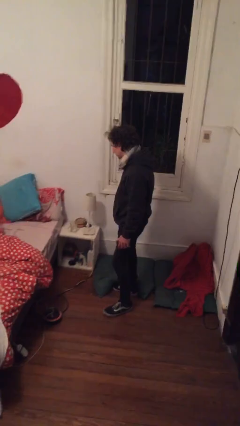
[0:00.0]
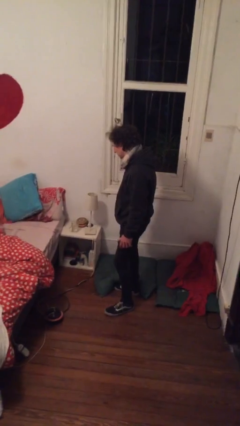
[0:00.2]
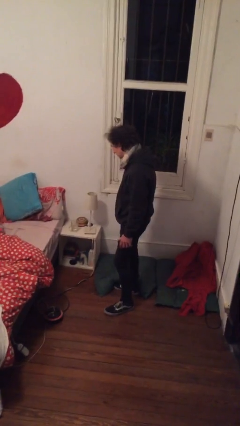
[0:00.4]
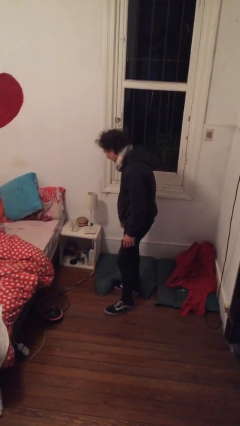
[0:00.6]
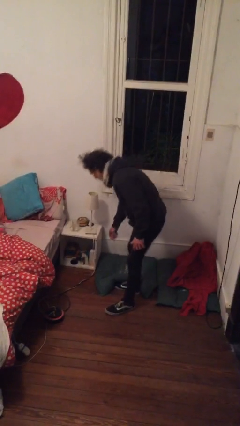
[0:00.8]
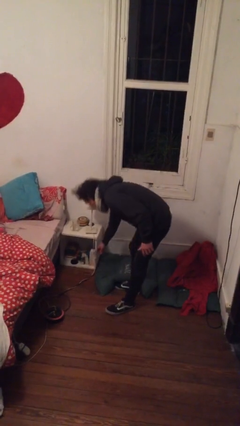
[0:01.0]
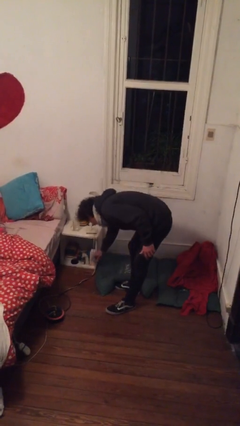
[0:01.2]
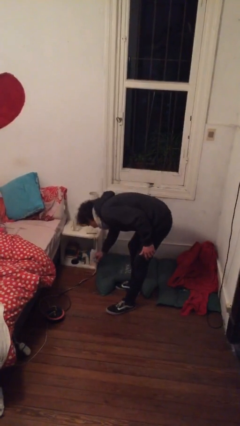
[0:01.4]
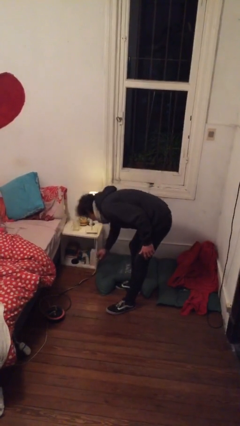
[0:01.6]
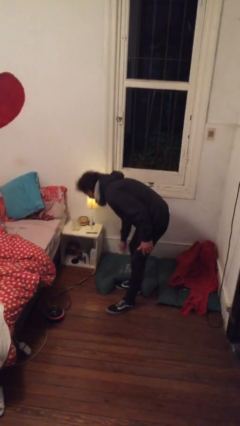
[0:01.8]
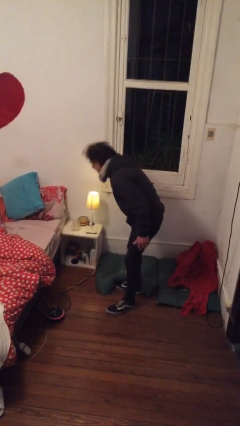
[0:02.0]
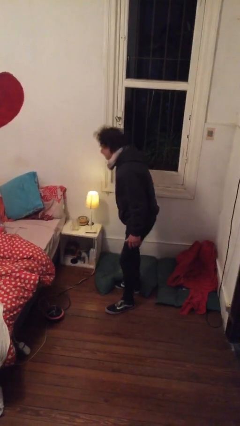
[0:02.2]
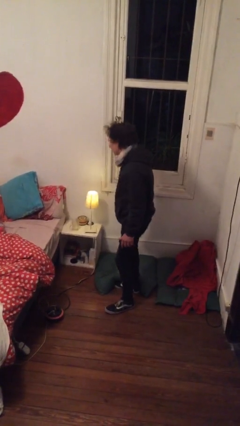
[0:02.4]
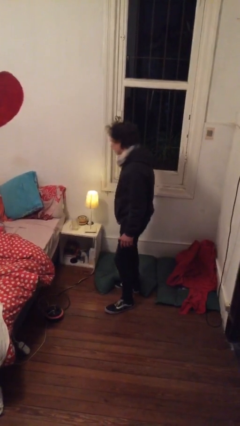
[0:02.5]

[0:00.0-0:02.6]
person turns on lamp

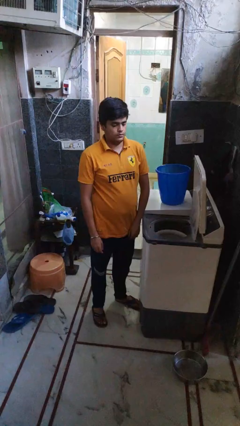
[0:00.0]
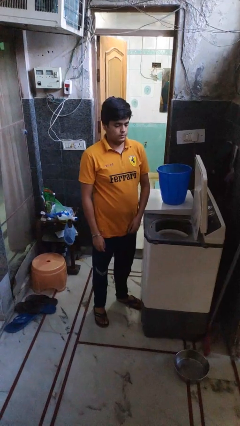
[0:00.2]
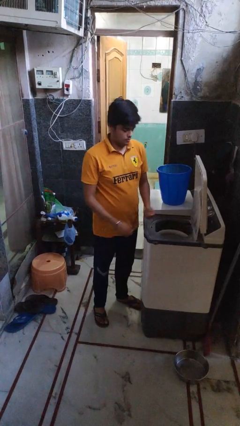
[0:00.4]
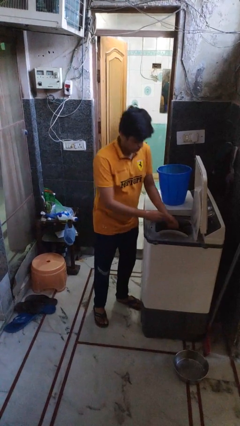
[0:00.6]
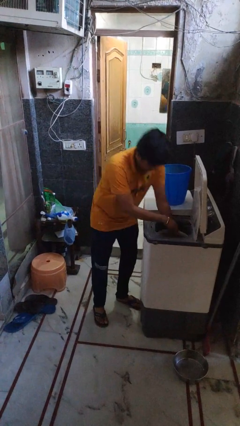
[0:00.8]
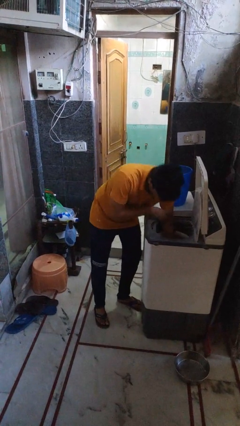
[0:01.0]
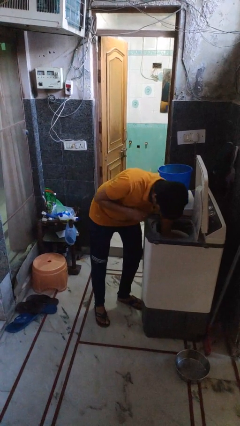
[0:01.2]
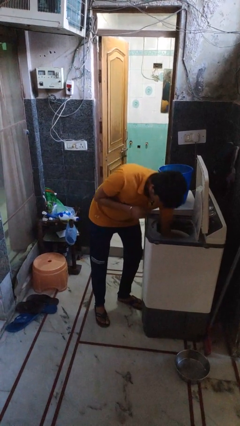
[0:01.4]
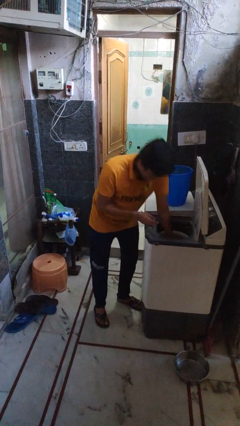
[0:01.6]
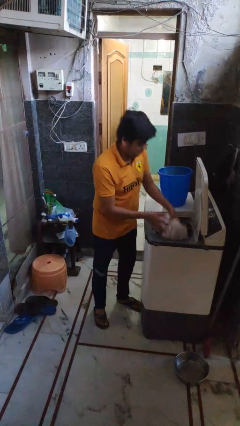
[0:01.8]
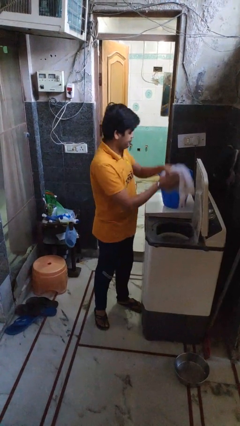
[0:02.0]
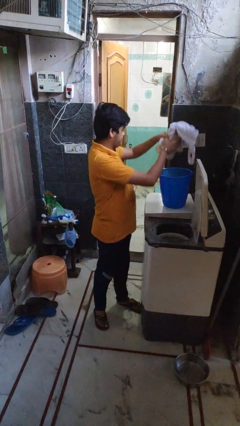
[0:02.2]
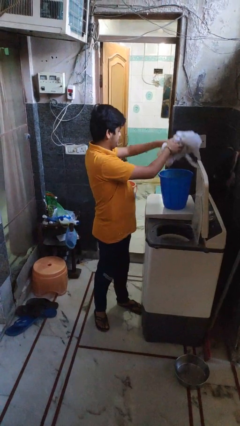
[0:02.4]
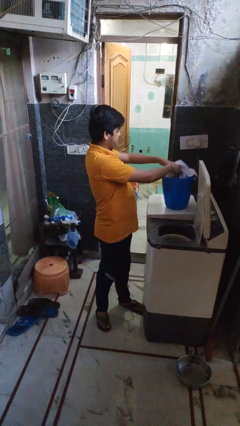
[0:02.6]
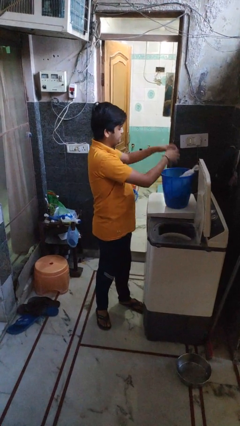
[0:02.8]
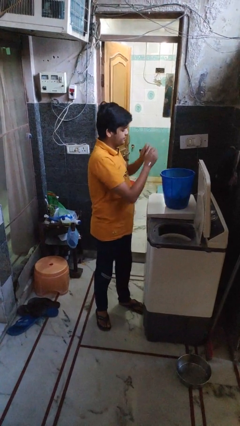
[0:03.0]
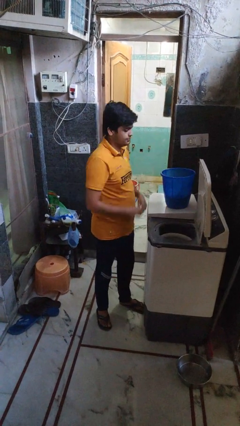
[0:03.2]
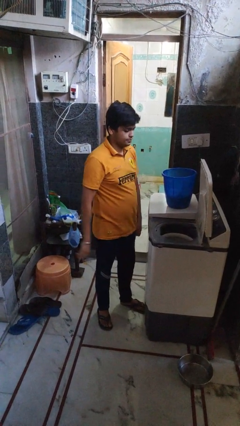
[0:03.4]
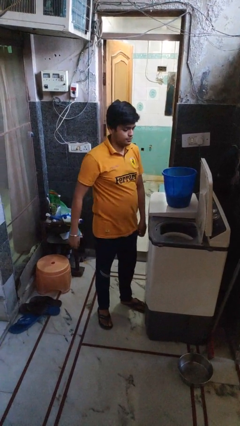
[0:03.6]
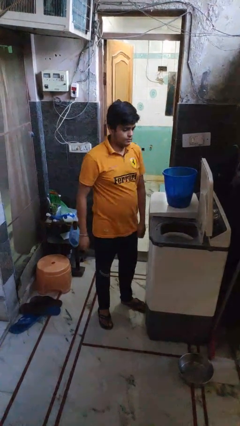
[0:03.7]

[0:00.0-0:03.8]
person unloads clotheswasher

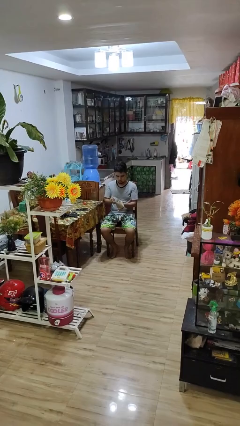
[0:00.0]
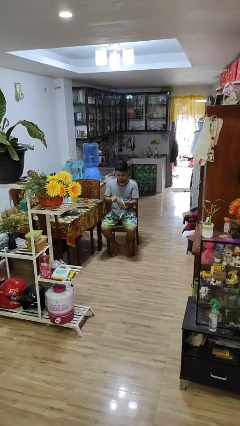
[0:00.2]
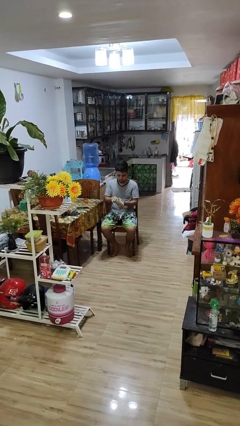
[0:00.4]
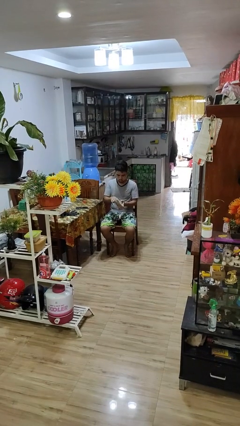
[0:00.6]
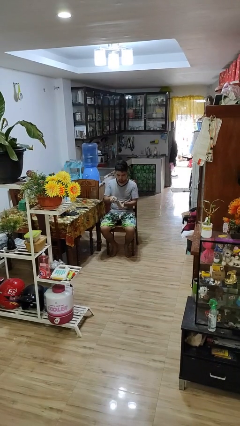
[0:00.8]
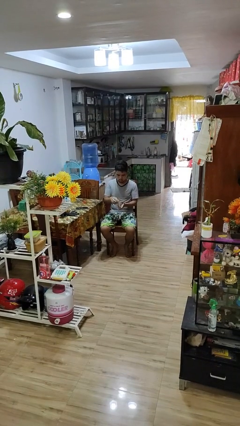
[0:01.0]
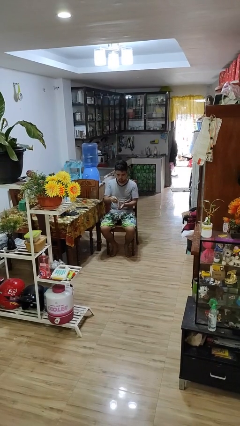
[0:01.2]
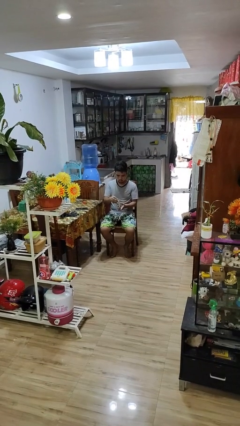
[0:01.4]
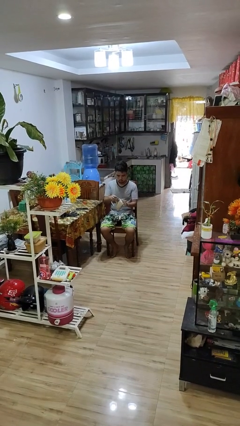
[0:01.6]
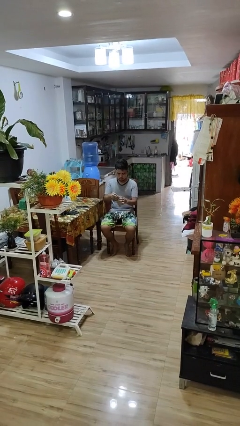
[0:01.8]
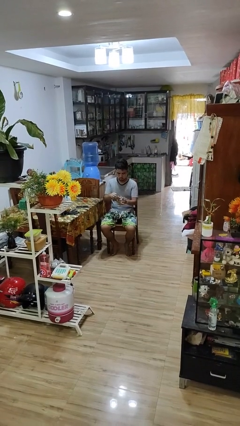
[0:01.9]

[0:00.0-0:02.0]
person puts object into purse

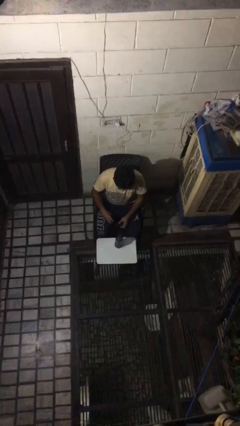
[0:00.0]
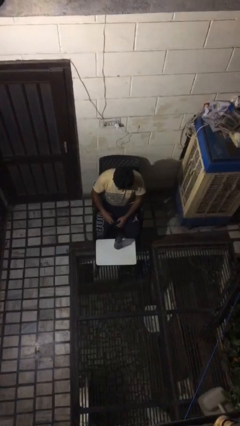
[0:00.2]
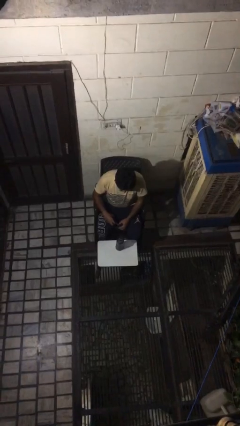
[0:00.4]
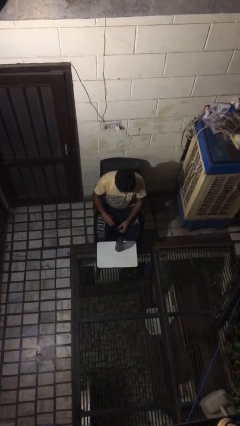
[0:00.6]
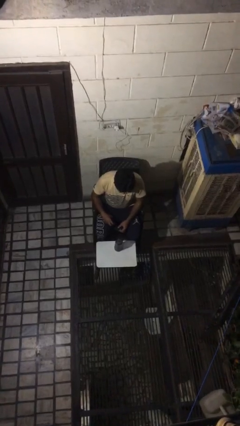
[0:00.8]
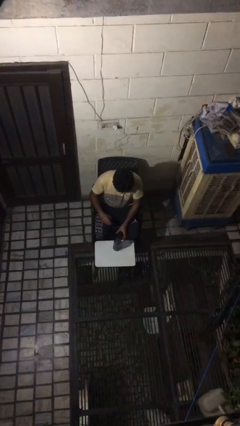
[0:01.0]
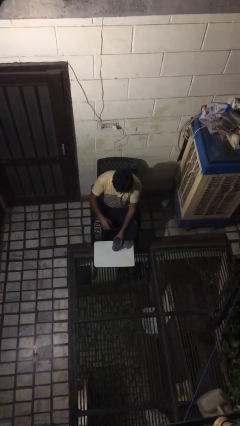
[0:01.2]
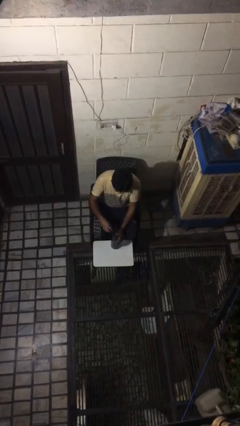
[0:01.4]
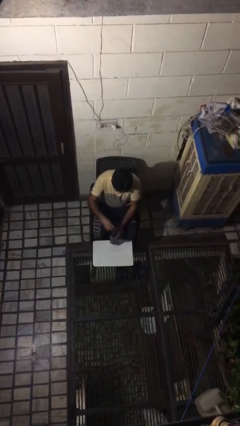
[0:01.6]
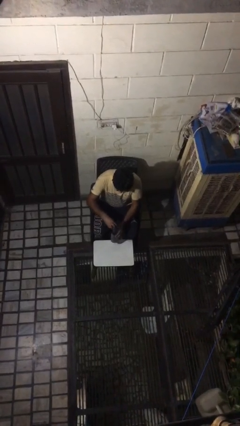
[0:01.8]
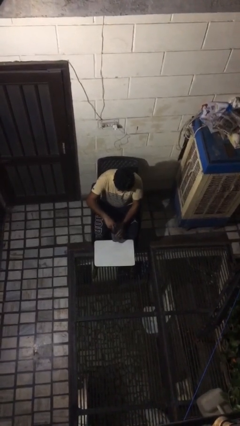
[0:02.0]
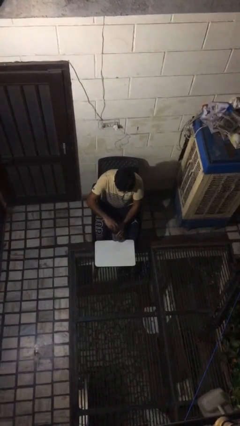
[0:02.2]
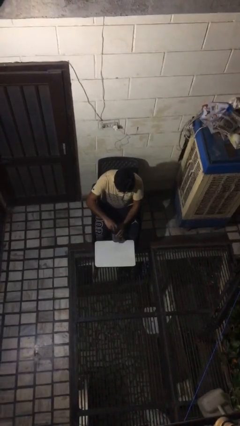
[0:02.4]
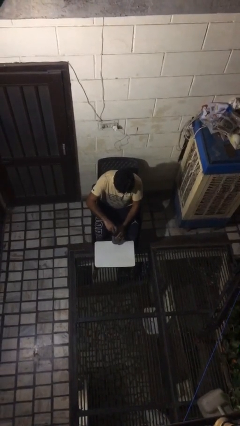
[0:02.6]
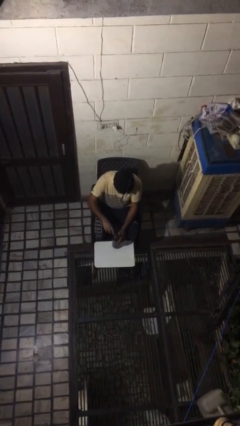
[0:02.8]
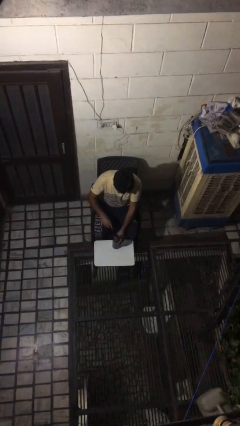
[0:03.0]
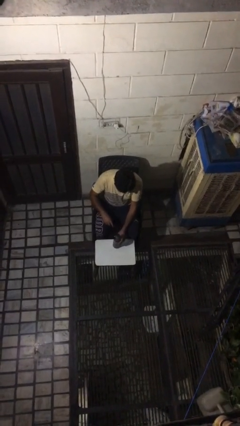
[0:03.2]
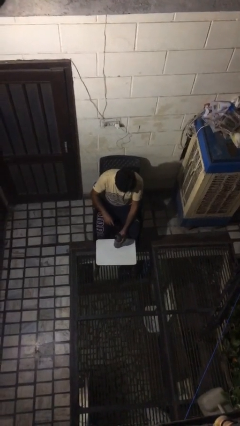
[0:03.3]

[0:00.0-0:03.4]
person screws lid to bottle

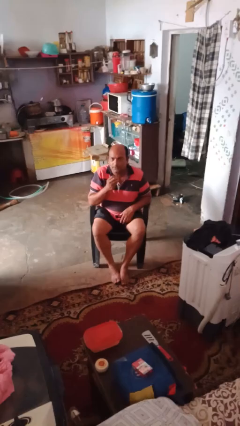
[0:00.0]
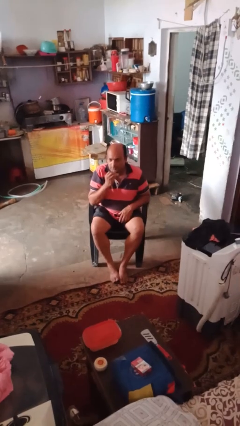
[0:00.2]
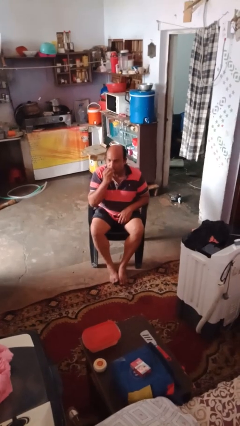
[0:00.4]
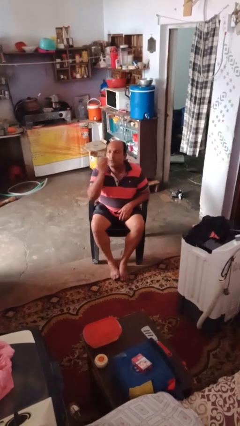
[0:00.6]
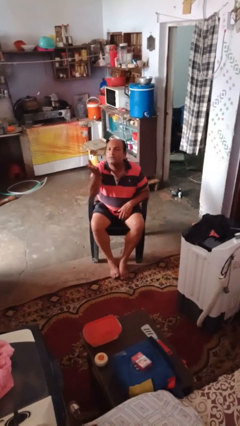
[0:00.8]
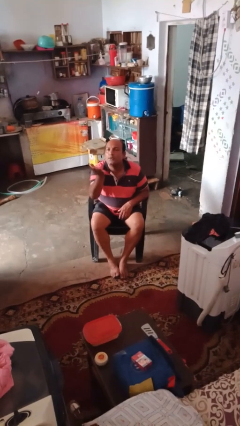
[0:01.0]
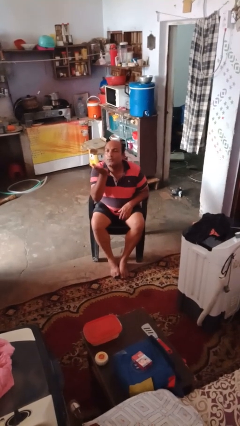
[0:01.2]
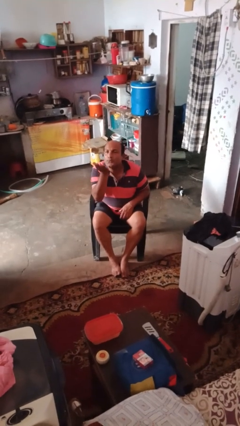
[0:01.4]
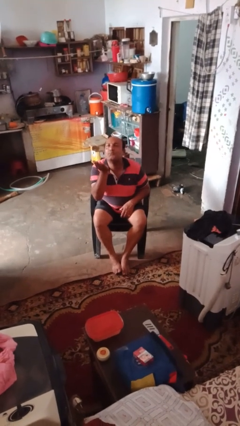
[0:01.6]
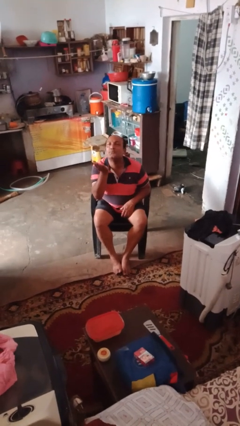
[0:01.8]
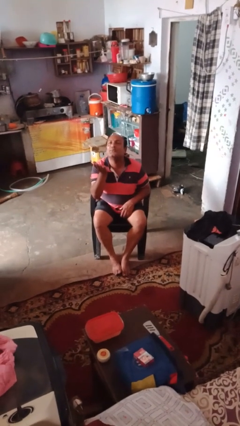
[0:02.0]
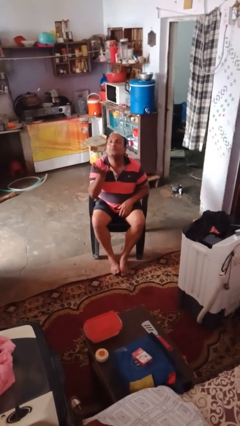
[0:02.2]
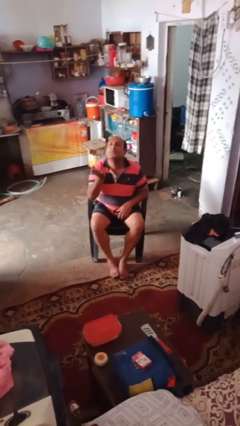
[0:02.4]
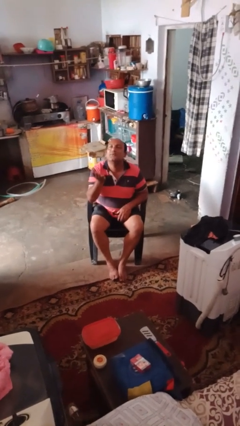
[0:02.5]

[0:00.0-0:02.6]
person gestures blow kiss

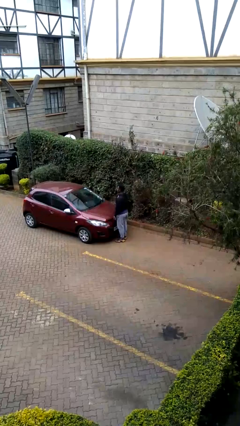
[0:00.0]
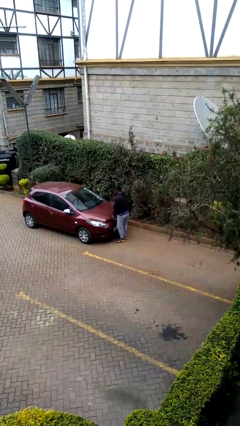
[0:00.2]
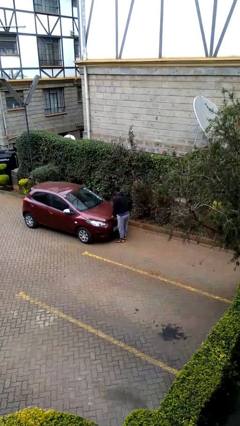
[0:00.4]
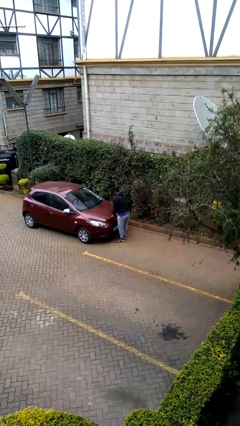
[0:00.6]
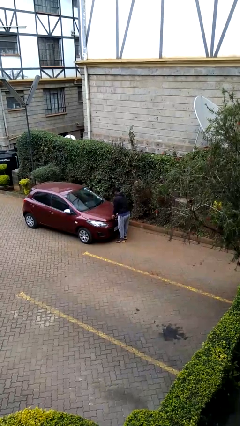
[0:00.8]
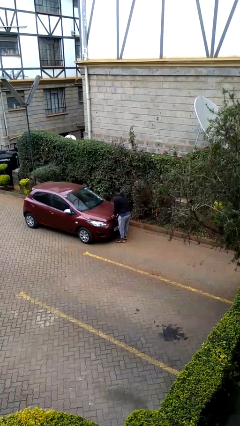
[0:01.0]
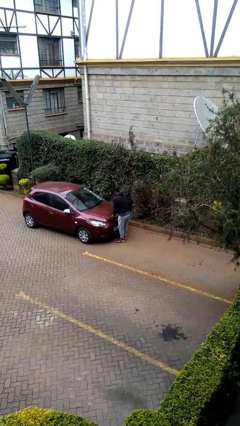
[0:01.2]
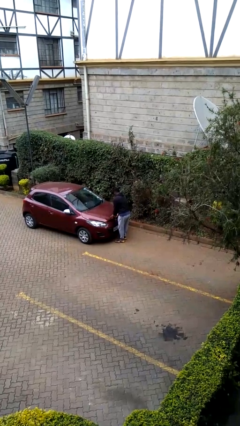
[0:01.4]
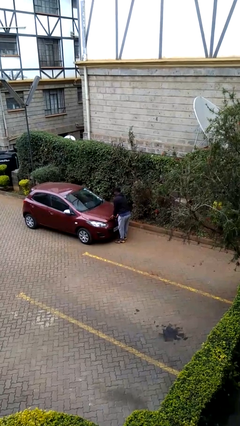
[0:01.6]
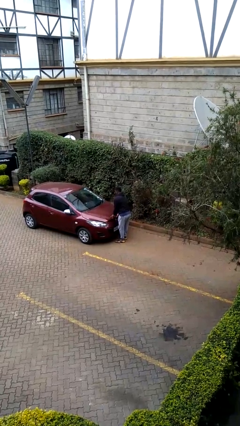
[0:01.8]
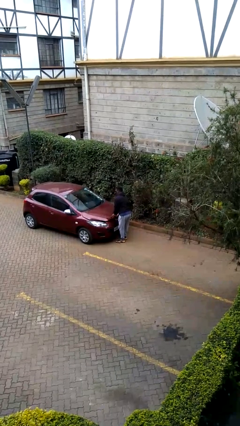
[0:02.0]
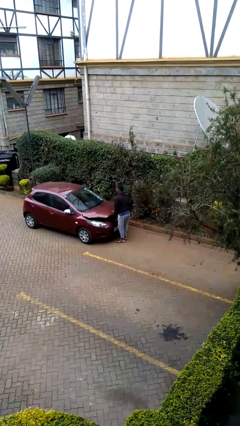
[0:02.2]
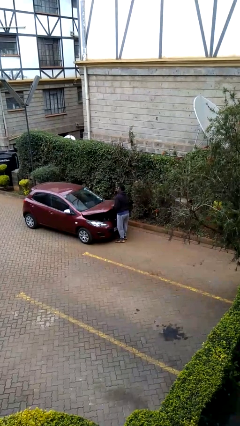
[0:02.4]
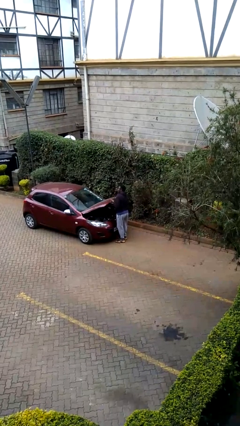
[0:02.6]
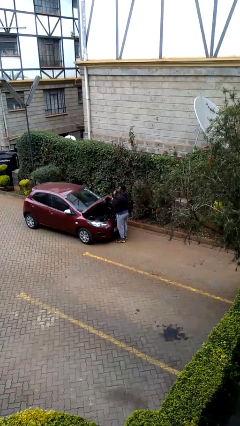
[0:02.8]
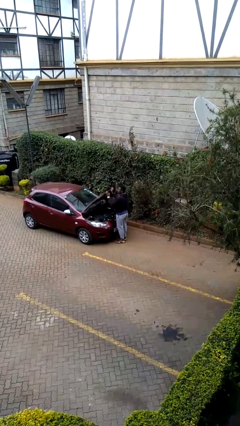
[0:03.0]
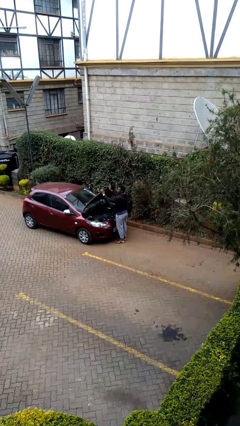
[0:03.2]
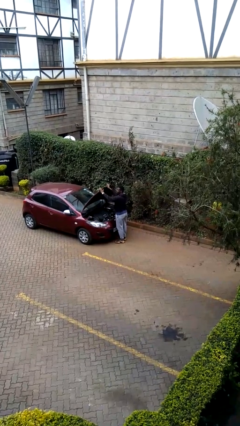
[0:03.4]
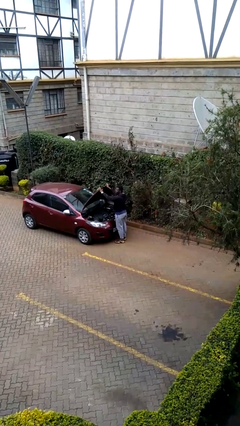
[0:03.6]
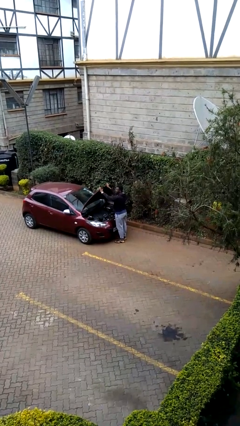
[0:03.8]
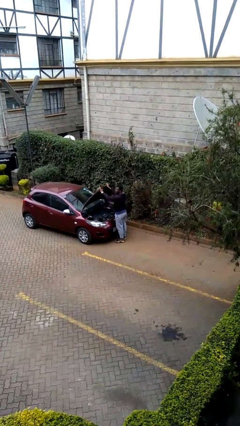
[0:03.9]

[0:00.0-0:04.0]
person opens car hood
